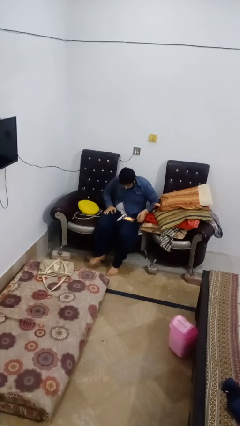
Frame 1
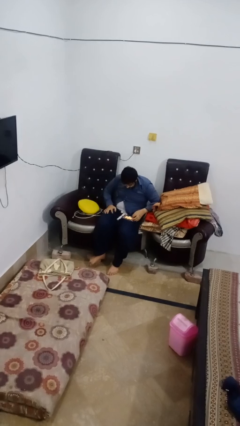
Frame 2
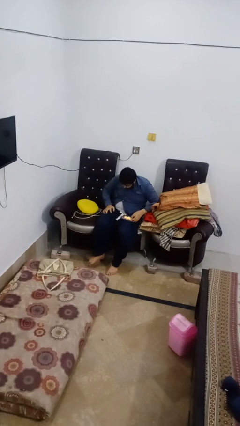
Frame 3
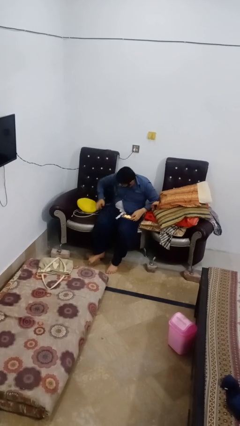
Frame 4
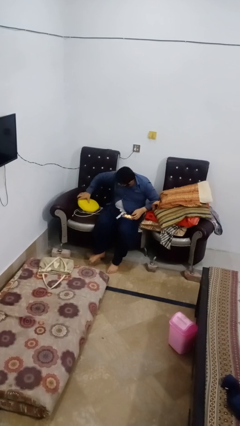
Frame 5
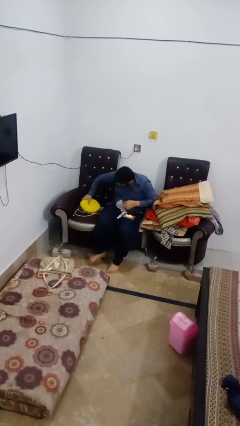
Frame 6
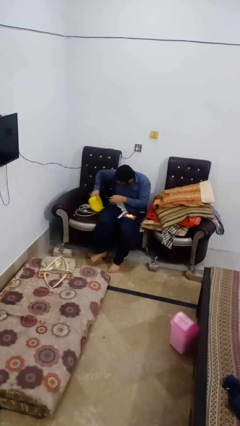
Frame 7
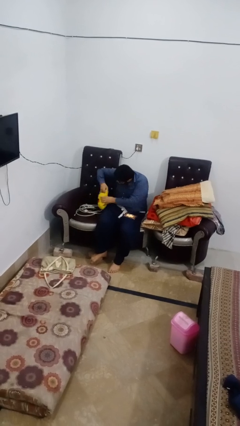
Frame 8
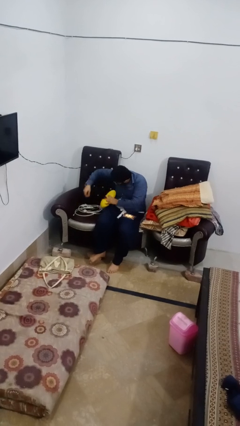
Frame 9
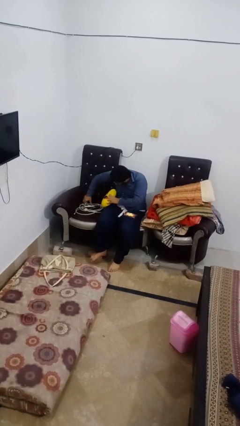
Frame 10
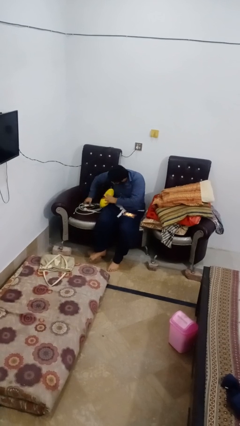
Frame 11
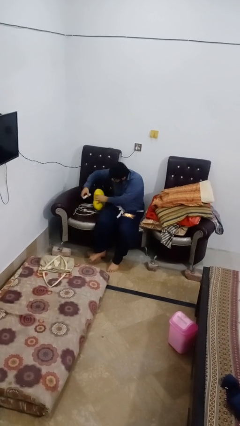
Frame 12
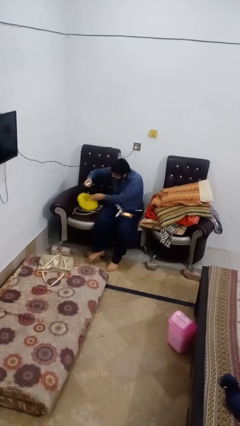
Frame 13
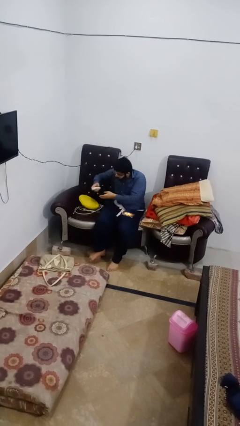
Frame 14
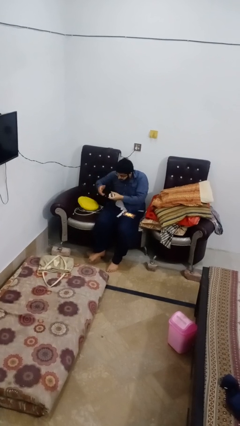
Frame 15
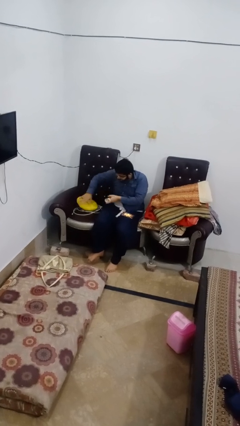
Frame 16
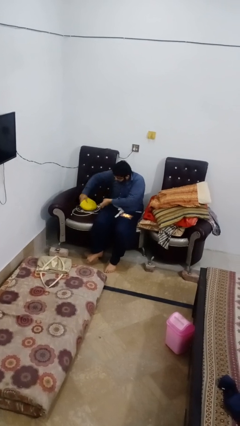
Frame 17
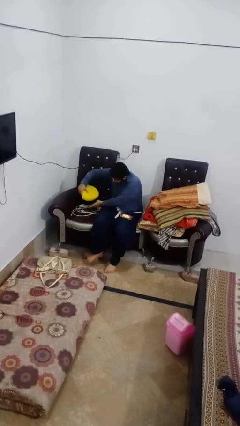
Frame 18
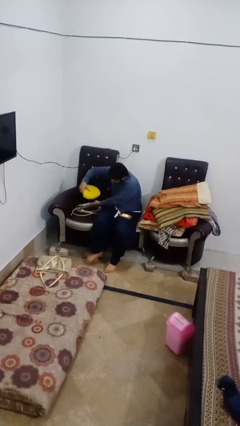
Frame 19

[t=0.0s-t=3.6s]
person searches in couch

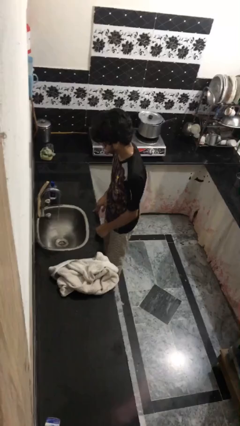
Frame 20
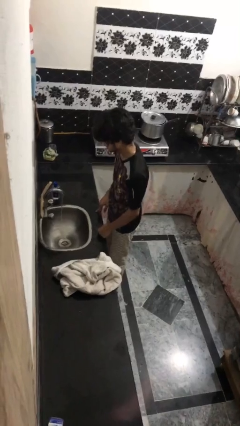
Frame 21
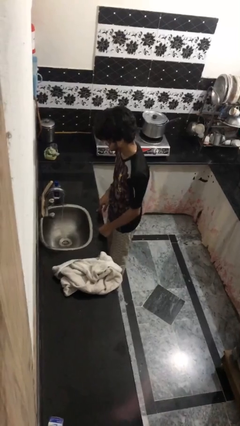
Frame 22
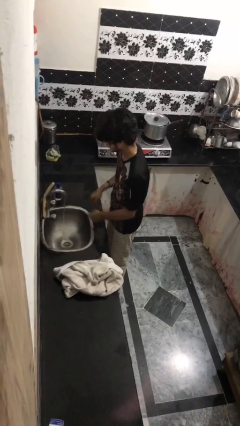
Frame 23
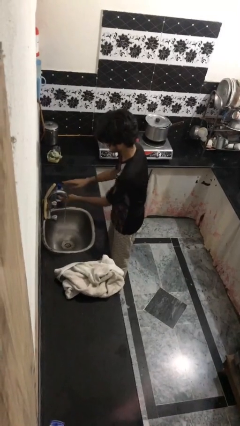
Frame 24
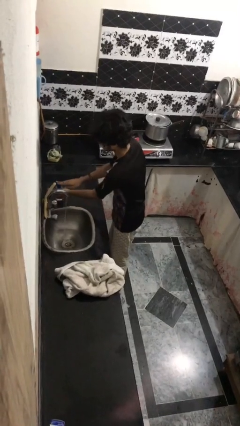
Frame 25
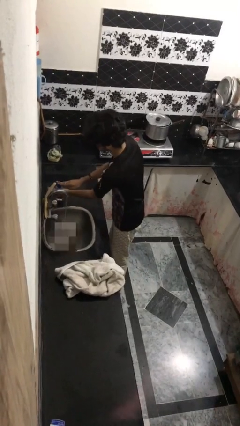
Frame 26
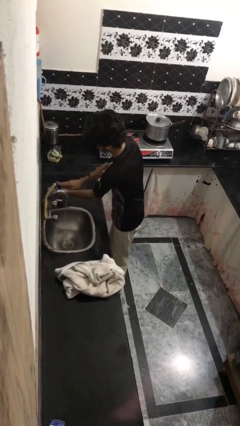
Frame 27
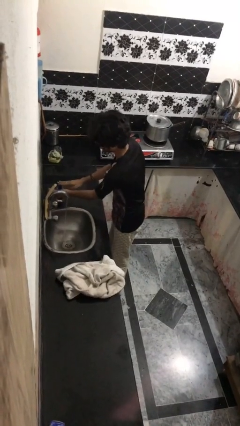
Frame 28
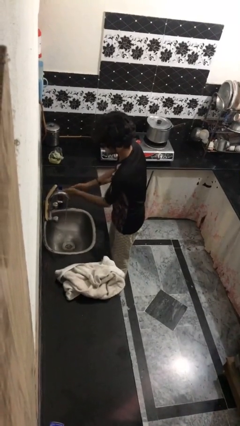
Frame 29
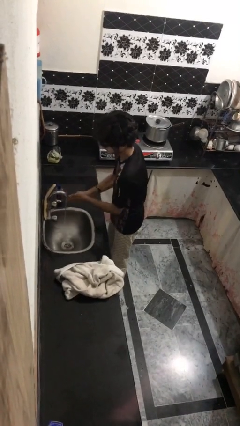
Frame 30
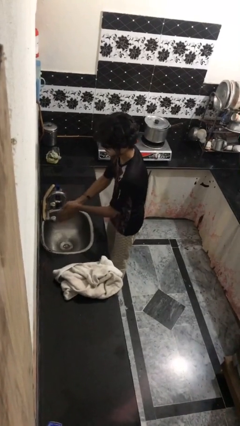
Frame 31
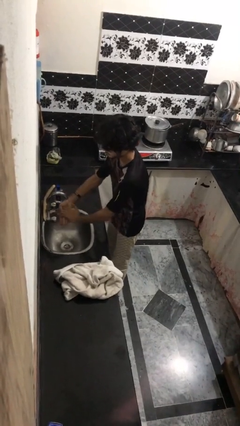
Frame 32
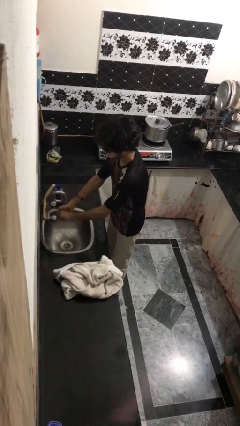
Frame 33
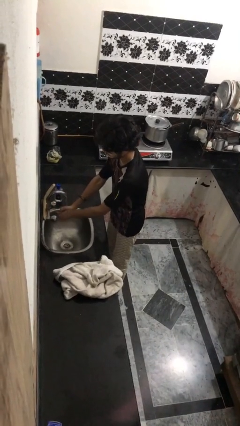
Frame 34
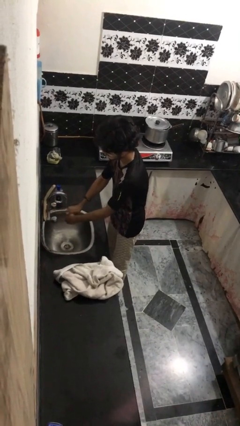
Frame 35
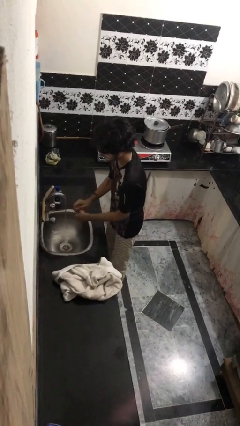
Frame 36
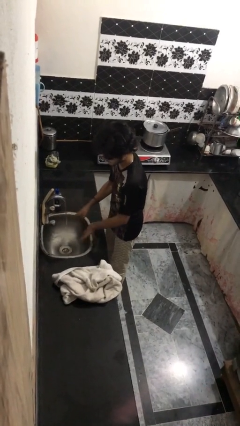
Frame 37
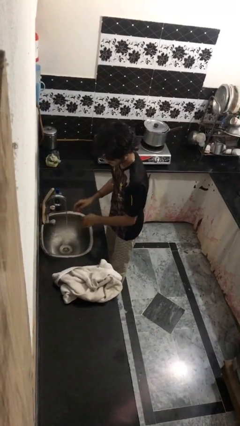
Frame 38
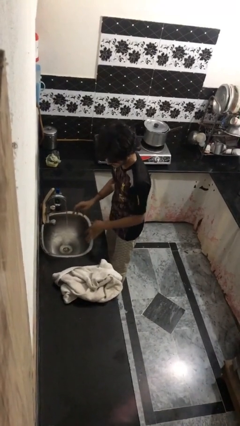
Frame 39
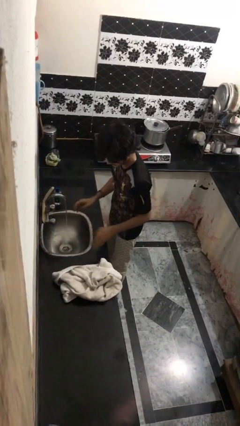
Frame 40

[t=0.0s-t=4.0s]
person washes hands

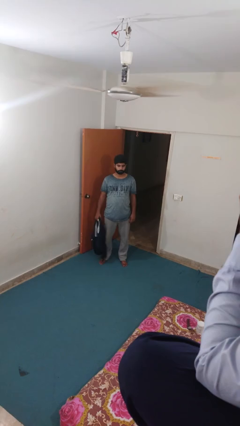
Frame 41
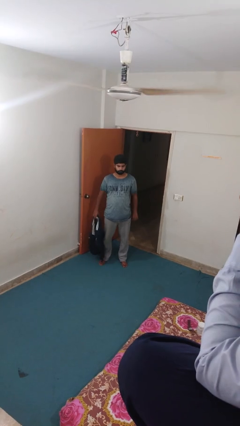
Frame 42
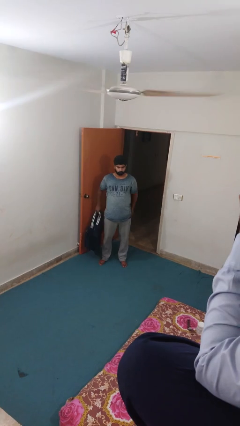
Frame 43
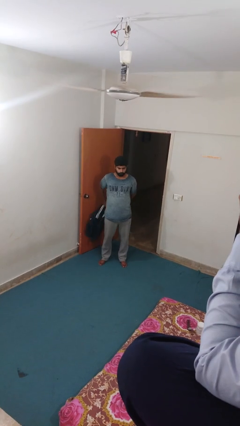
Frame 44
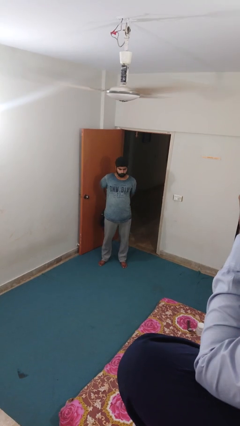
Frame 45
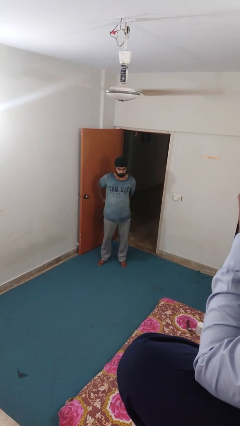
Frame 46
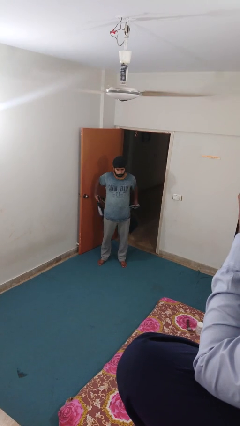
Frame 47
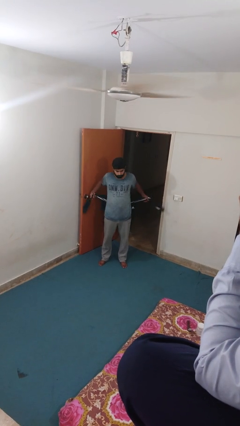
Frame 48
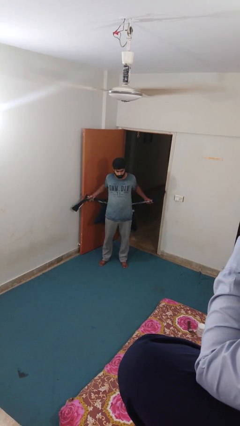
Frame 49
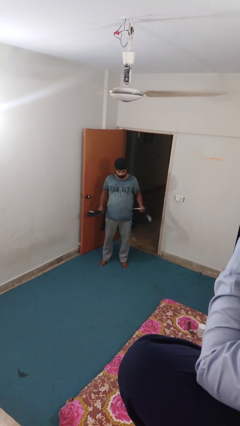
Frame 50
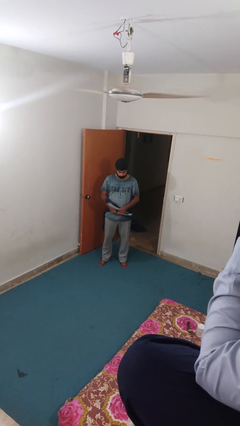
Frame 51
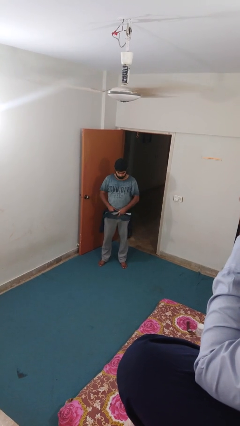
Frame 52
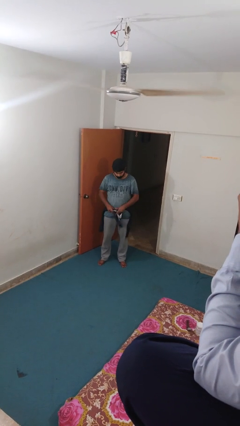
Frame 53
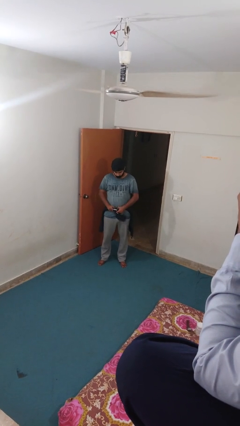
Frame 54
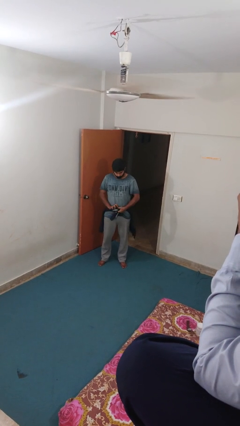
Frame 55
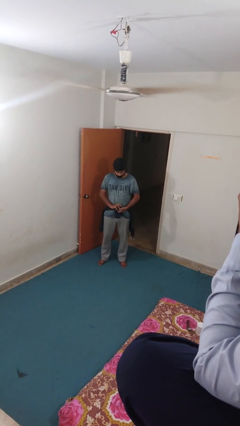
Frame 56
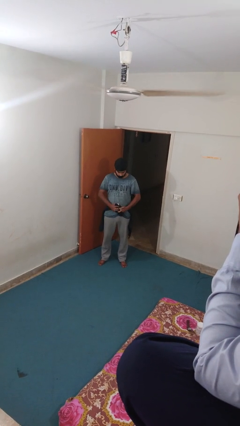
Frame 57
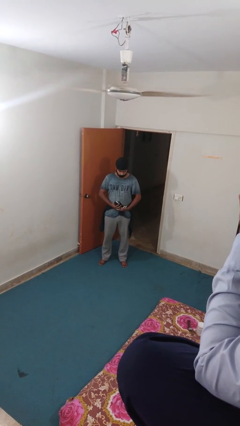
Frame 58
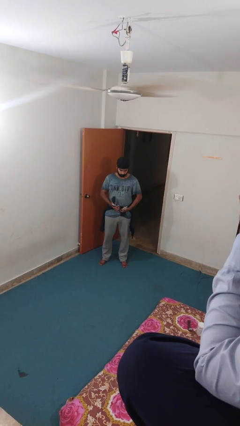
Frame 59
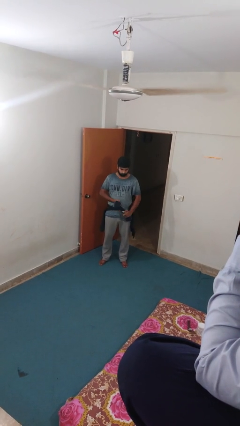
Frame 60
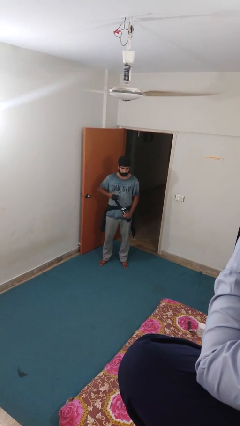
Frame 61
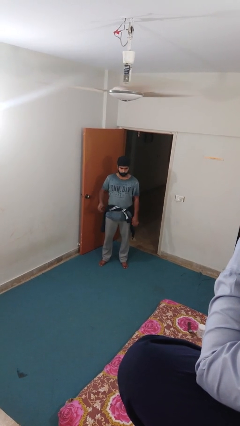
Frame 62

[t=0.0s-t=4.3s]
person ties jacket around waist

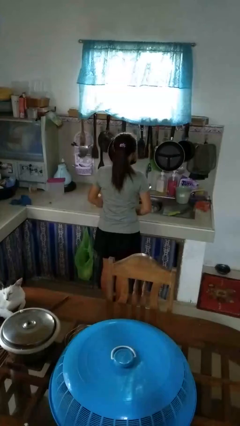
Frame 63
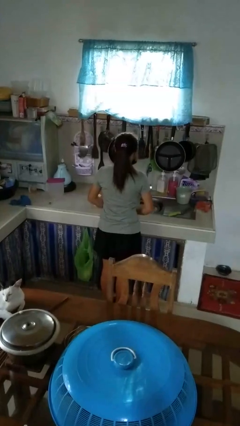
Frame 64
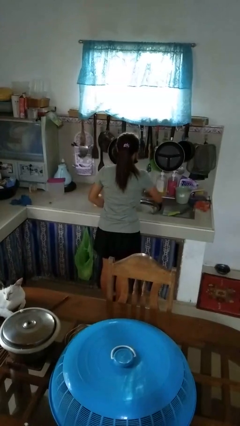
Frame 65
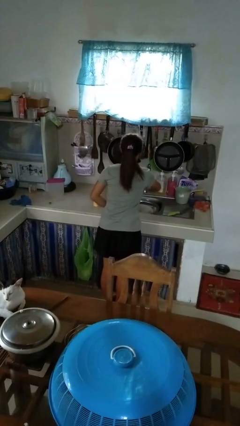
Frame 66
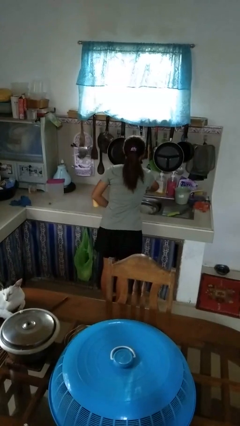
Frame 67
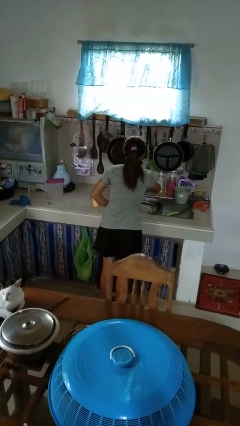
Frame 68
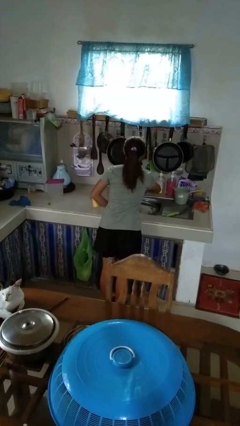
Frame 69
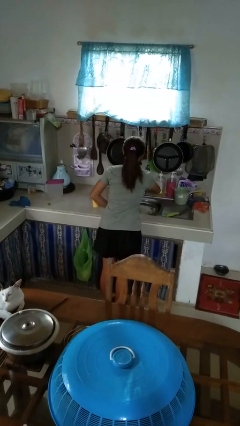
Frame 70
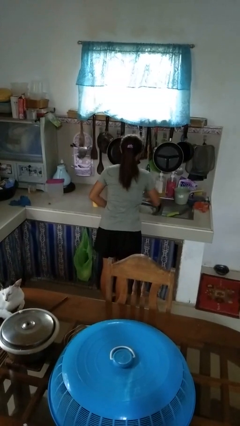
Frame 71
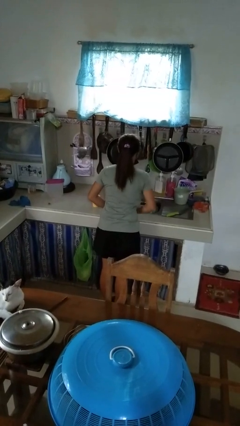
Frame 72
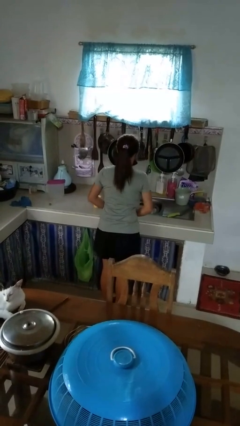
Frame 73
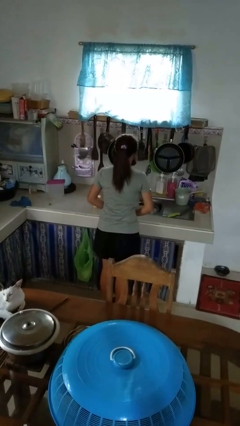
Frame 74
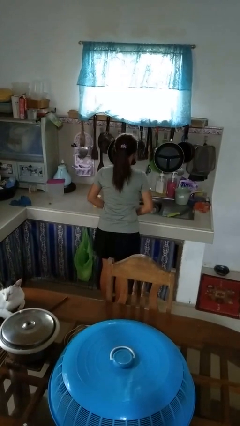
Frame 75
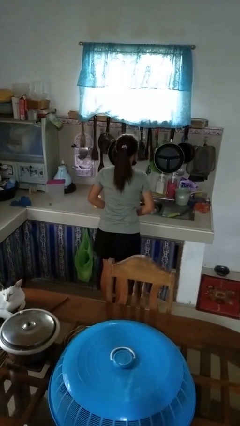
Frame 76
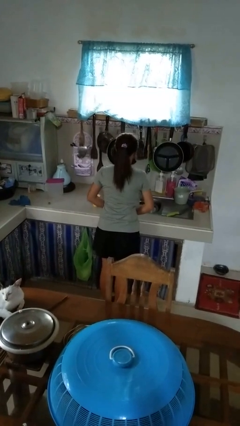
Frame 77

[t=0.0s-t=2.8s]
person turns on faucet

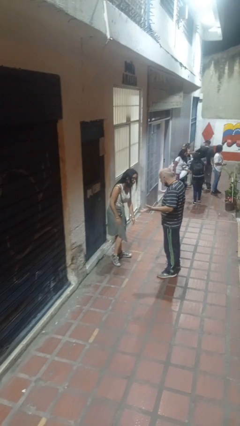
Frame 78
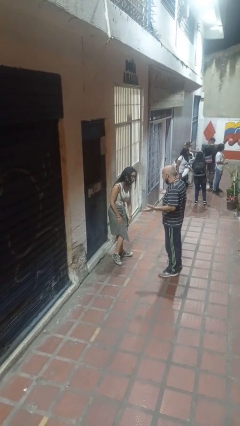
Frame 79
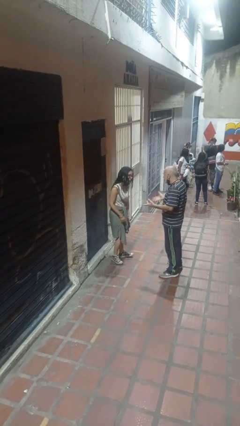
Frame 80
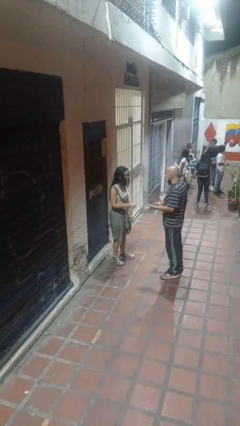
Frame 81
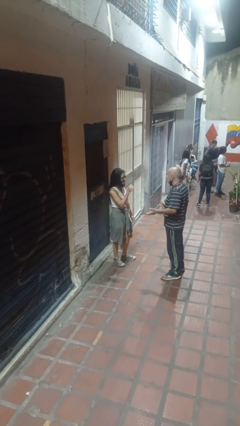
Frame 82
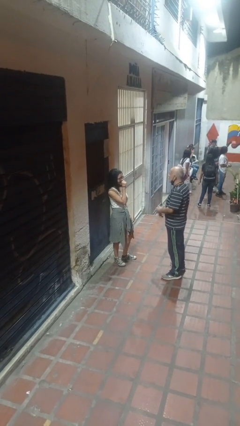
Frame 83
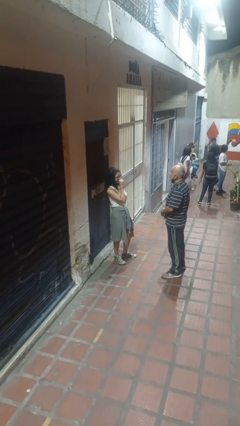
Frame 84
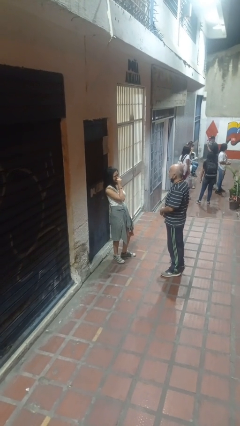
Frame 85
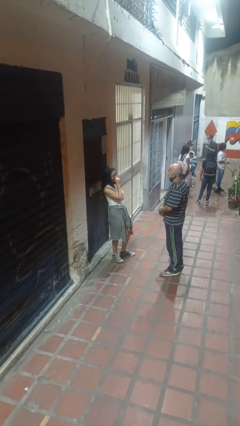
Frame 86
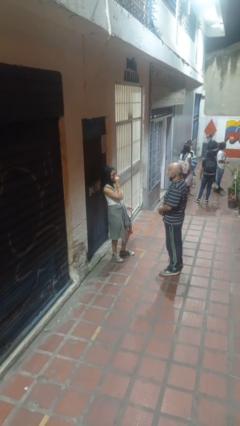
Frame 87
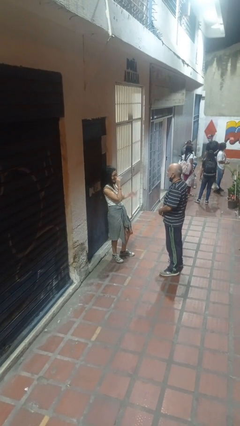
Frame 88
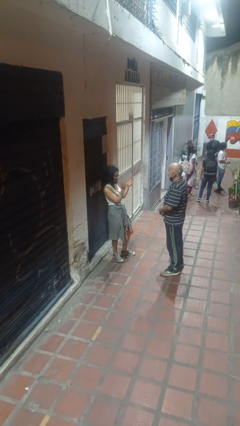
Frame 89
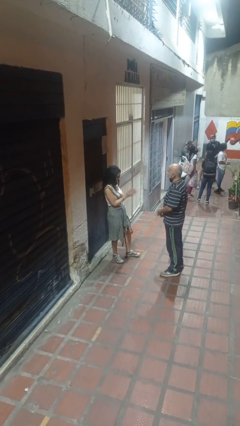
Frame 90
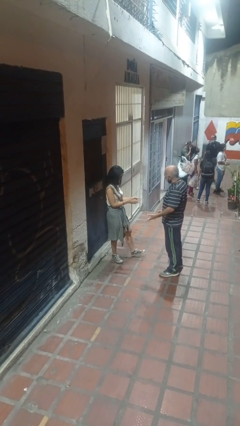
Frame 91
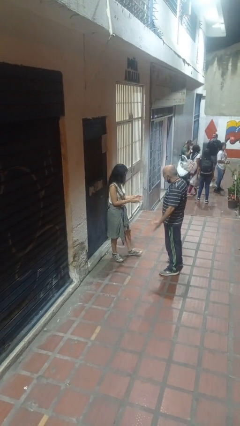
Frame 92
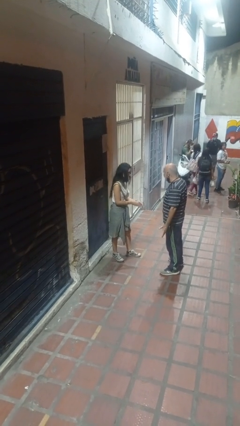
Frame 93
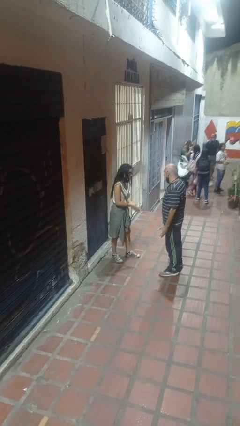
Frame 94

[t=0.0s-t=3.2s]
person laughs with person
